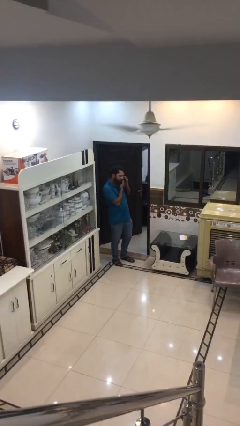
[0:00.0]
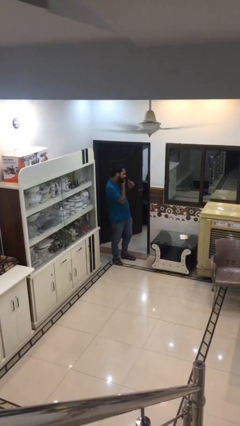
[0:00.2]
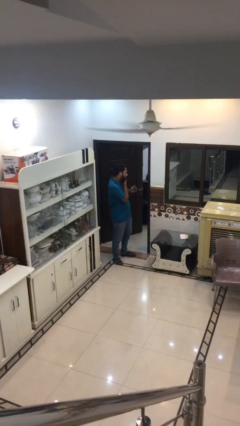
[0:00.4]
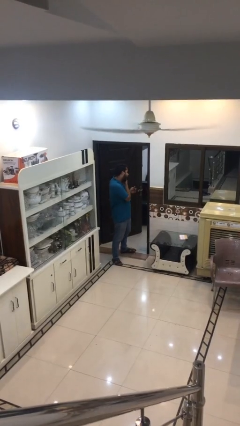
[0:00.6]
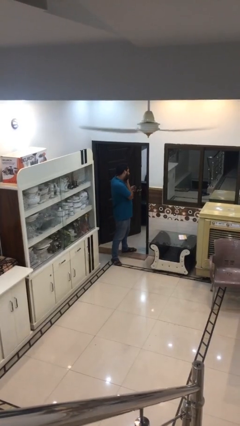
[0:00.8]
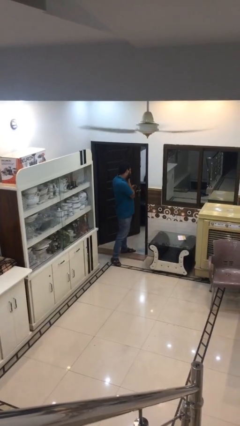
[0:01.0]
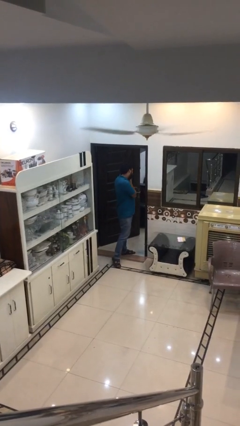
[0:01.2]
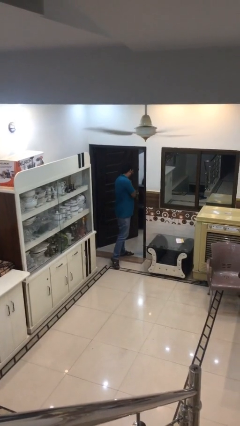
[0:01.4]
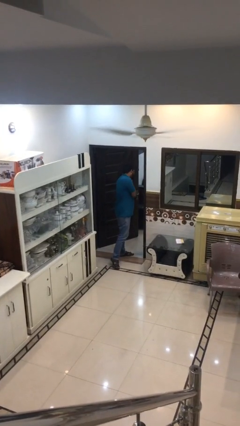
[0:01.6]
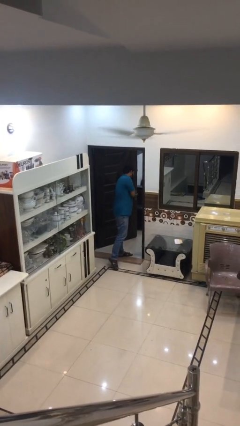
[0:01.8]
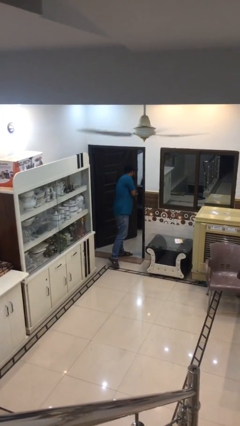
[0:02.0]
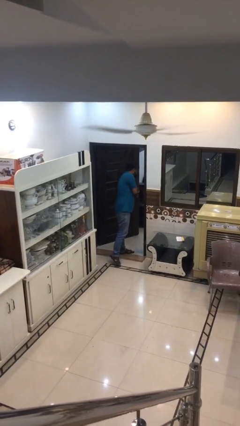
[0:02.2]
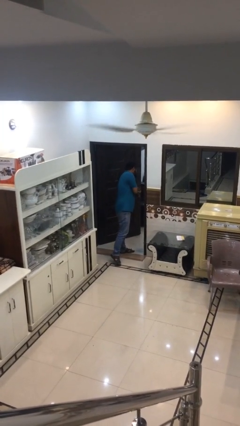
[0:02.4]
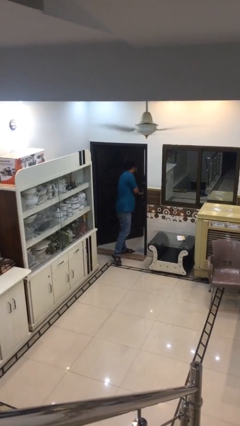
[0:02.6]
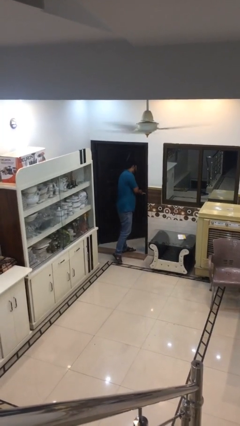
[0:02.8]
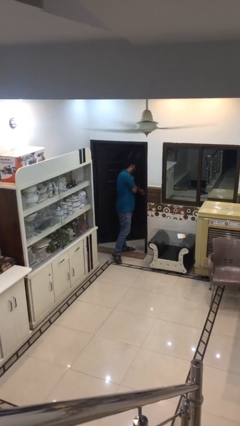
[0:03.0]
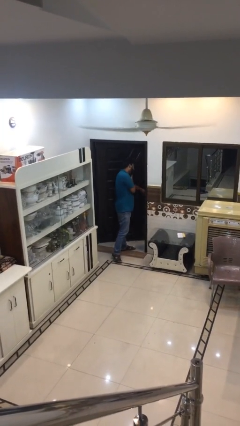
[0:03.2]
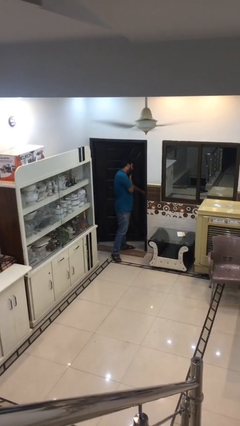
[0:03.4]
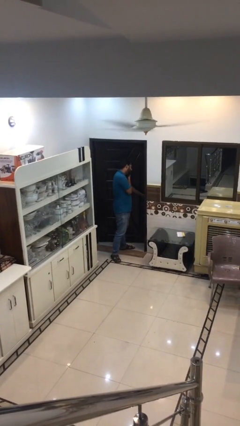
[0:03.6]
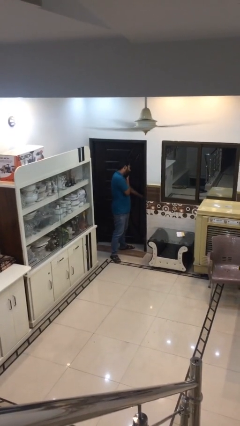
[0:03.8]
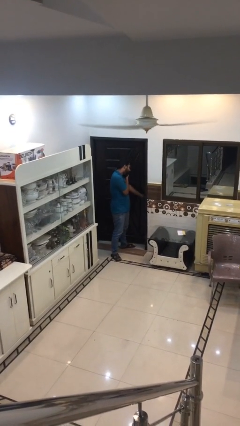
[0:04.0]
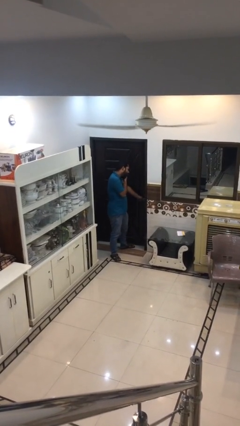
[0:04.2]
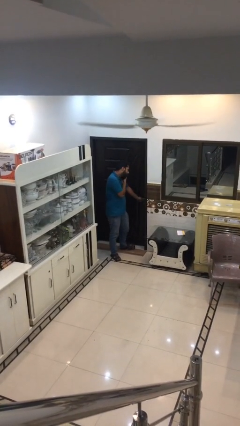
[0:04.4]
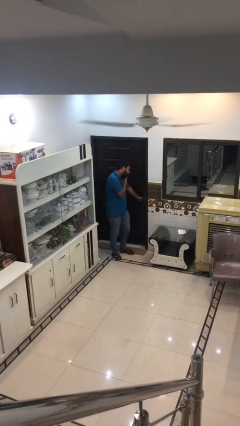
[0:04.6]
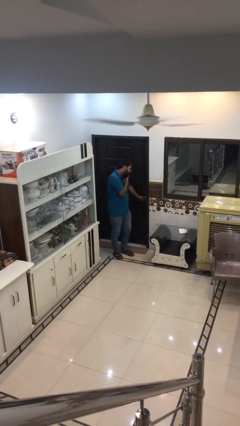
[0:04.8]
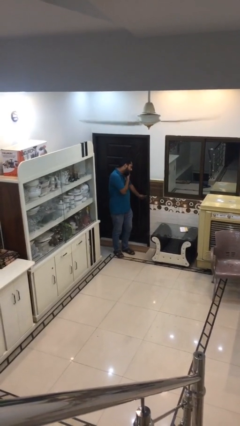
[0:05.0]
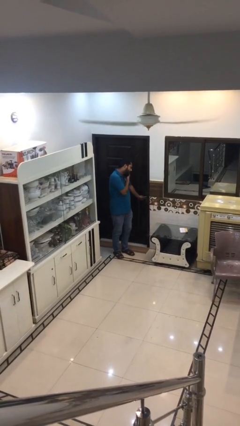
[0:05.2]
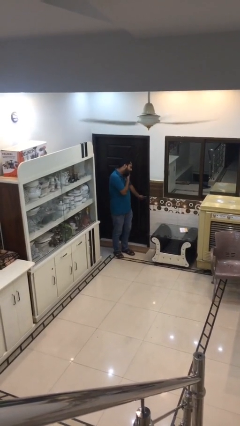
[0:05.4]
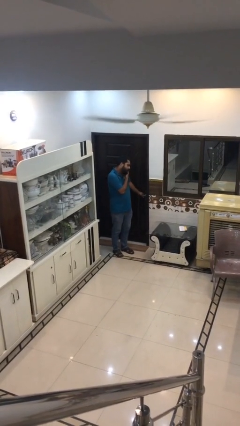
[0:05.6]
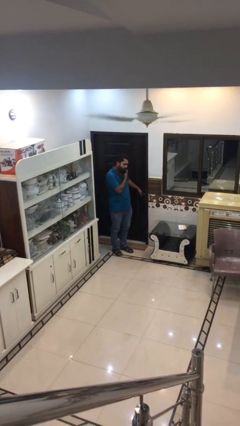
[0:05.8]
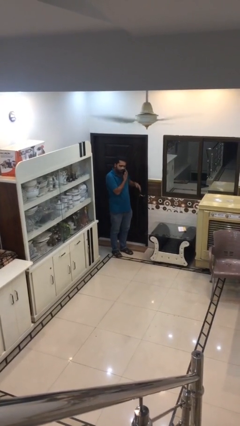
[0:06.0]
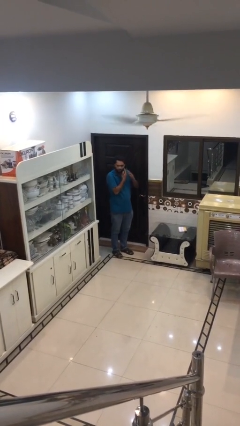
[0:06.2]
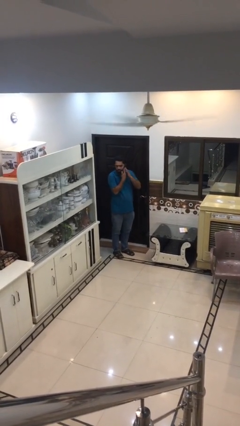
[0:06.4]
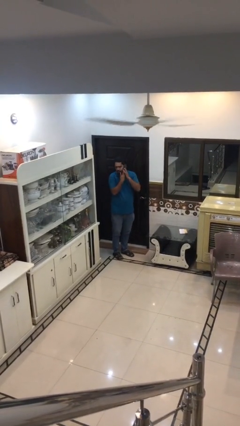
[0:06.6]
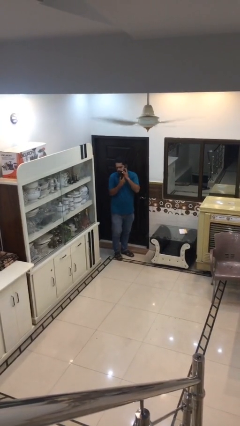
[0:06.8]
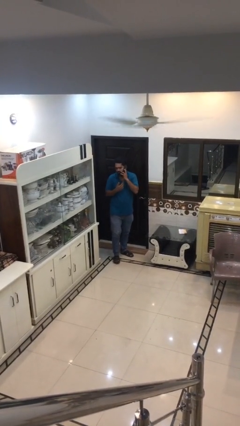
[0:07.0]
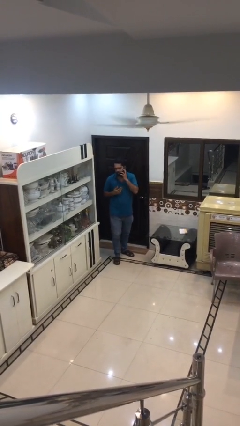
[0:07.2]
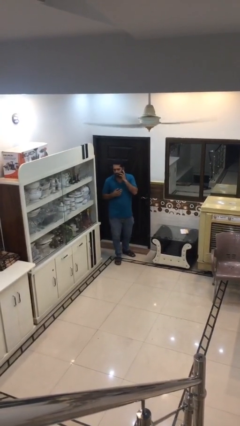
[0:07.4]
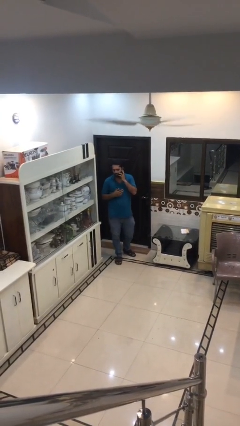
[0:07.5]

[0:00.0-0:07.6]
person closes facility door

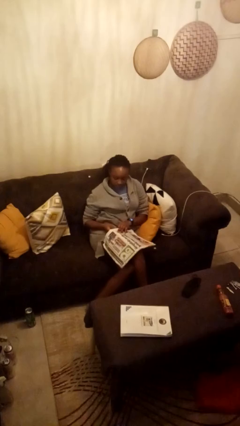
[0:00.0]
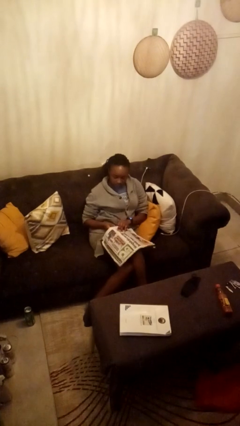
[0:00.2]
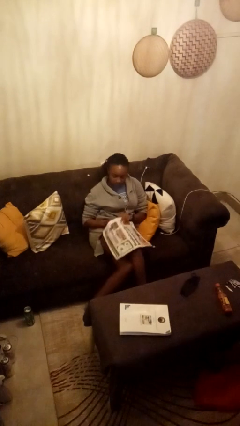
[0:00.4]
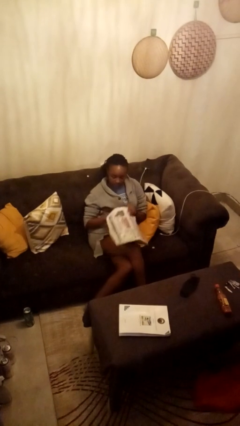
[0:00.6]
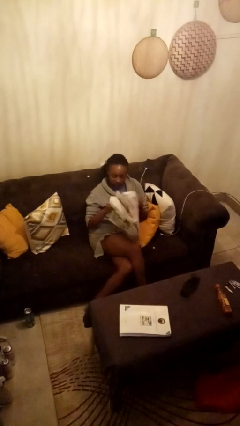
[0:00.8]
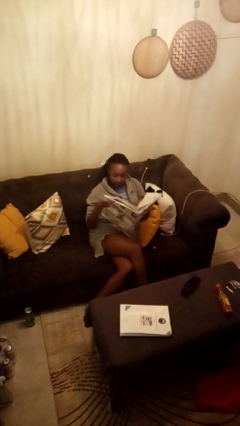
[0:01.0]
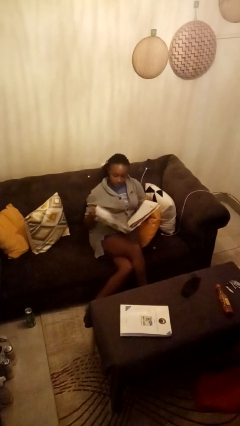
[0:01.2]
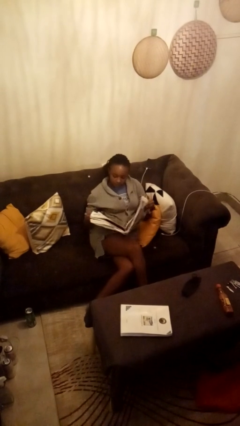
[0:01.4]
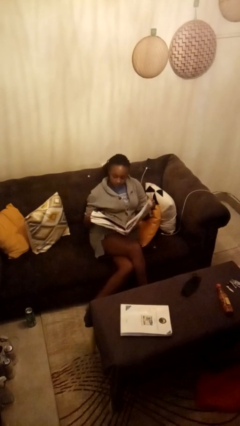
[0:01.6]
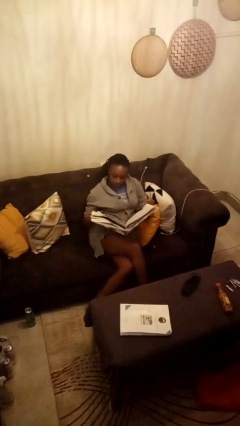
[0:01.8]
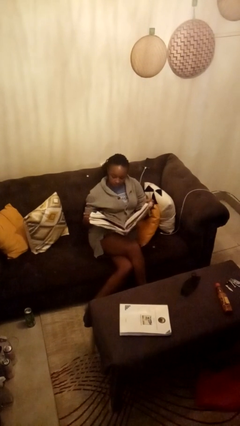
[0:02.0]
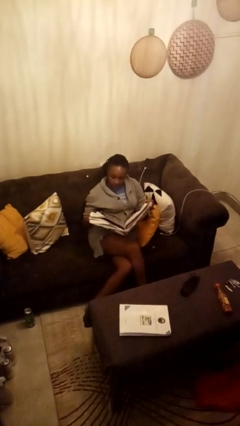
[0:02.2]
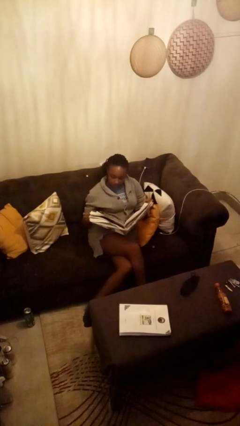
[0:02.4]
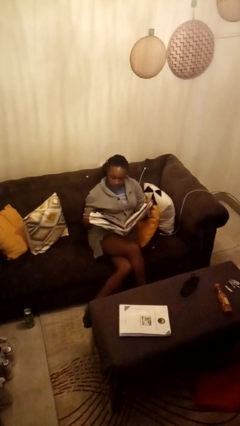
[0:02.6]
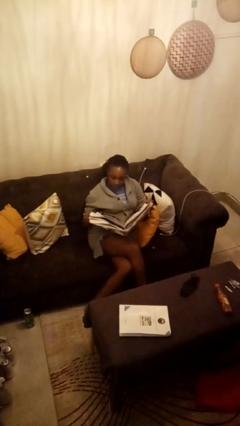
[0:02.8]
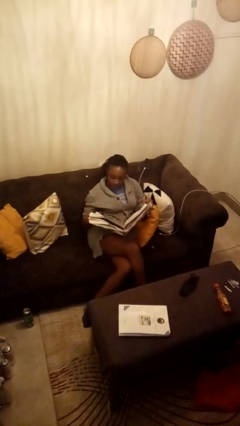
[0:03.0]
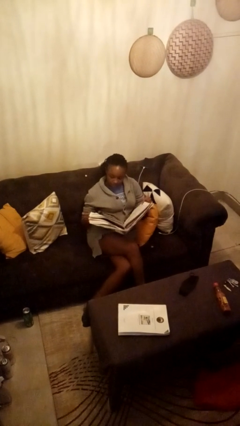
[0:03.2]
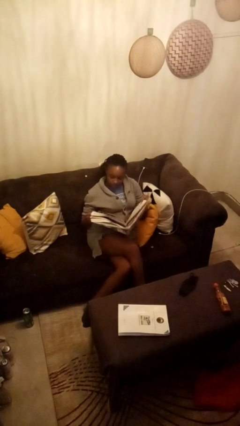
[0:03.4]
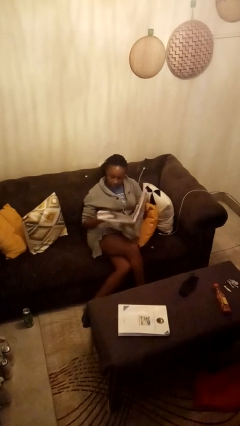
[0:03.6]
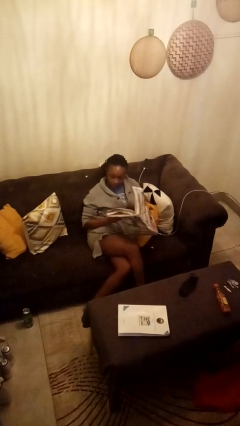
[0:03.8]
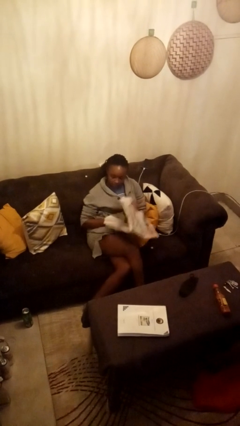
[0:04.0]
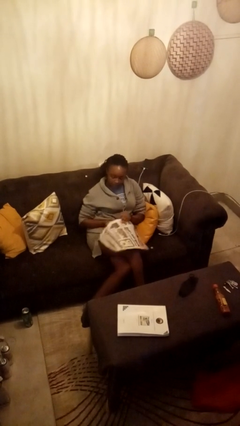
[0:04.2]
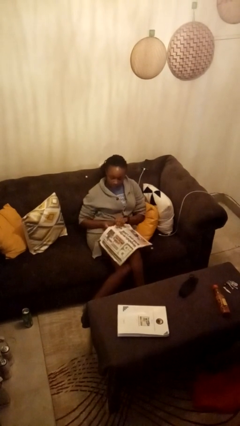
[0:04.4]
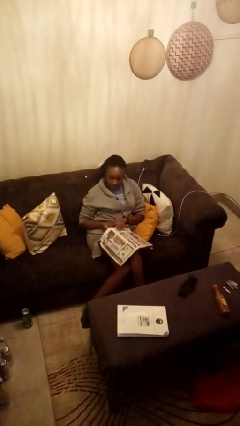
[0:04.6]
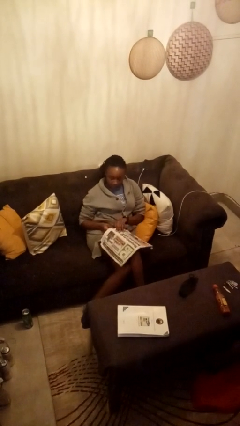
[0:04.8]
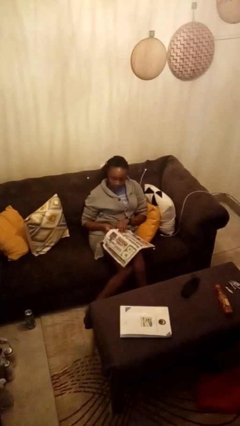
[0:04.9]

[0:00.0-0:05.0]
person reads newspaper

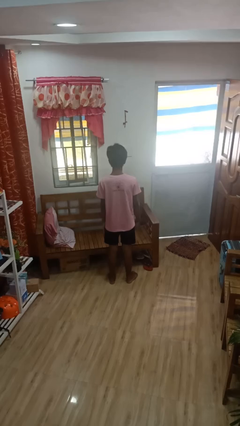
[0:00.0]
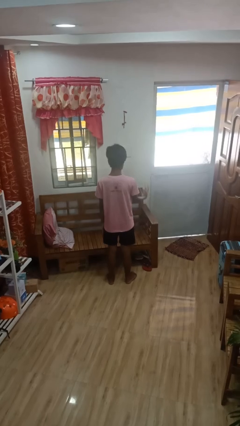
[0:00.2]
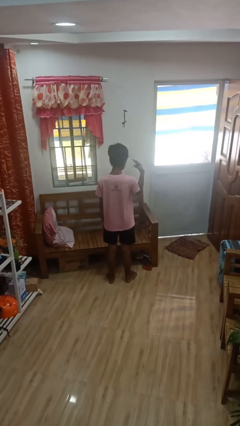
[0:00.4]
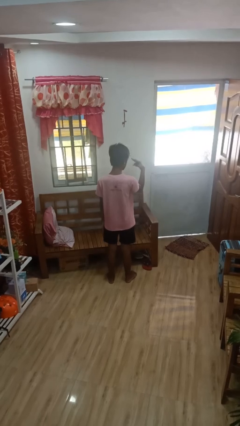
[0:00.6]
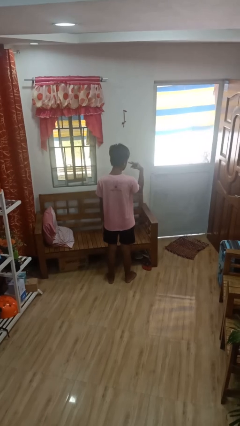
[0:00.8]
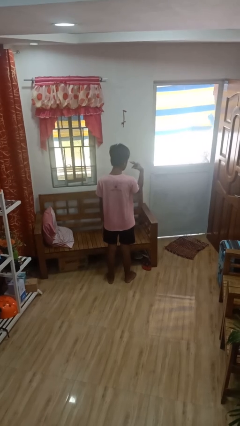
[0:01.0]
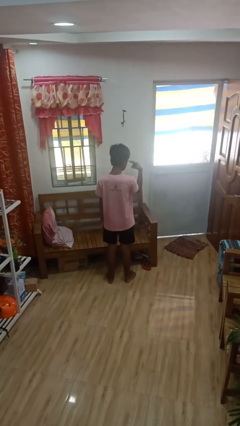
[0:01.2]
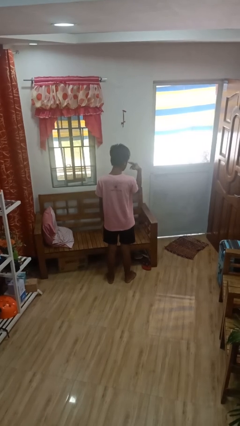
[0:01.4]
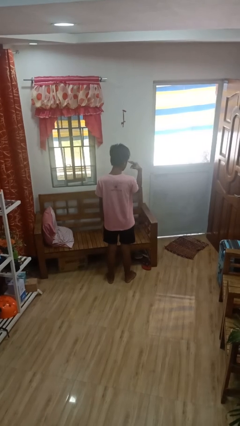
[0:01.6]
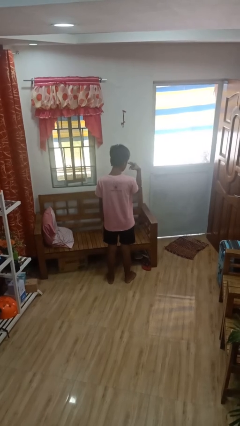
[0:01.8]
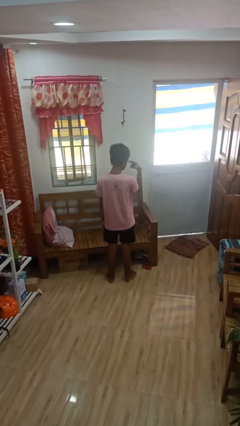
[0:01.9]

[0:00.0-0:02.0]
person gestures watch closely

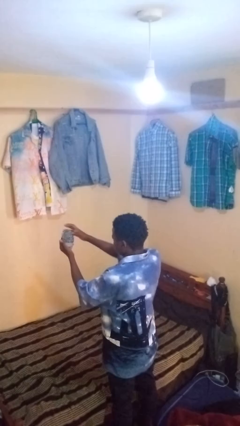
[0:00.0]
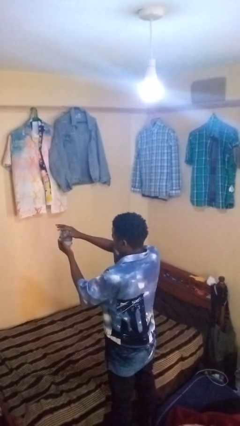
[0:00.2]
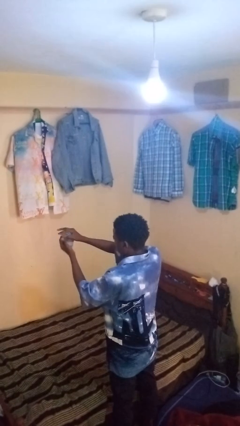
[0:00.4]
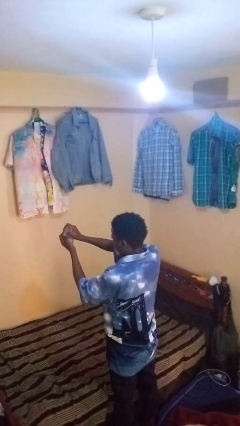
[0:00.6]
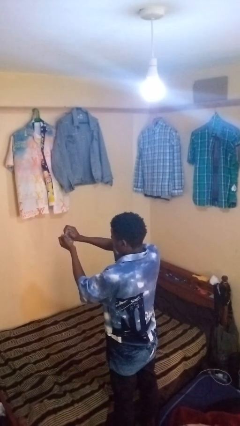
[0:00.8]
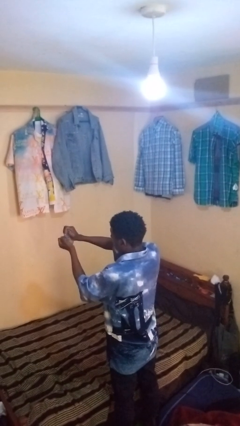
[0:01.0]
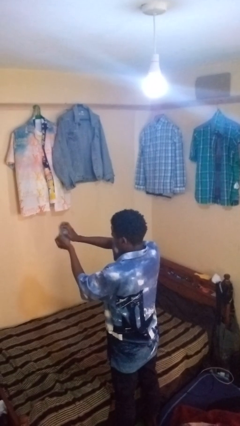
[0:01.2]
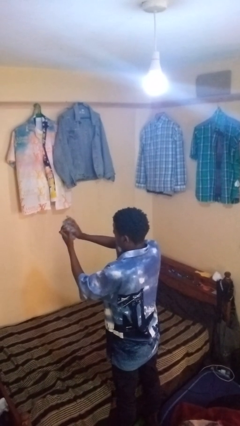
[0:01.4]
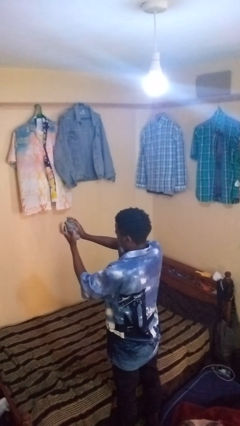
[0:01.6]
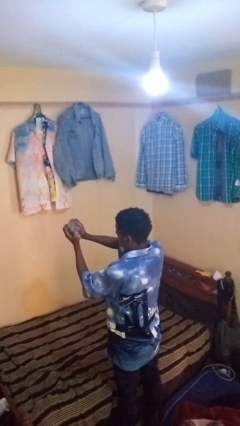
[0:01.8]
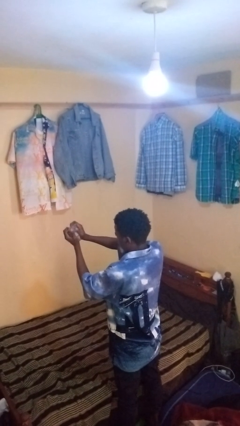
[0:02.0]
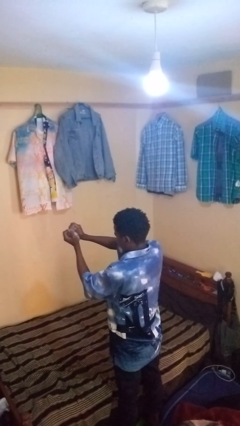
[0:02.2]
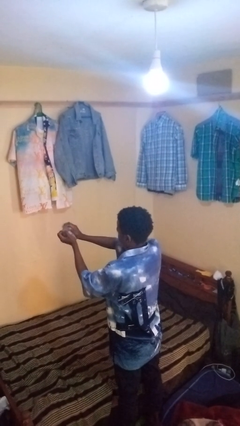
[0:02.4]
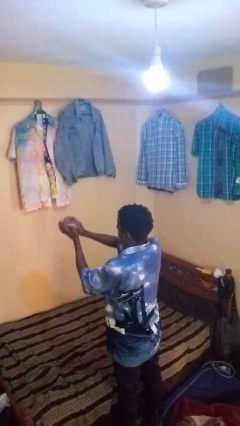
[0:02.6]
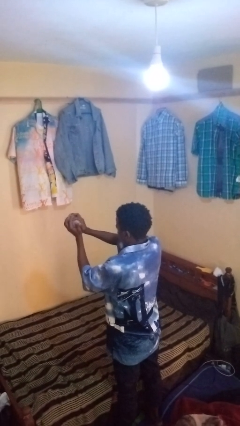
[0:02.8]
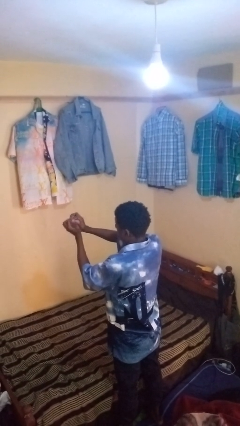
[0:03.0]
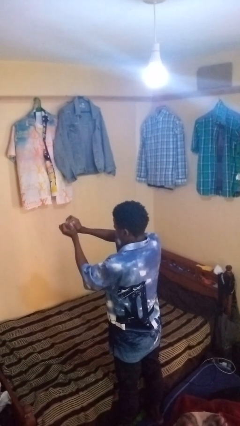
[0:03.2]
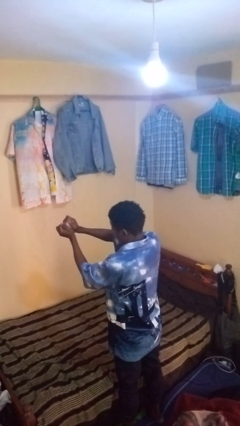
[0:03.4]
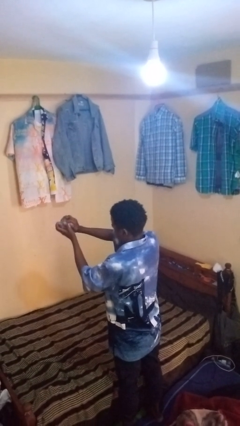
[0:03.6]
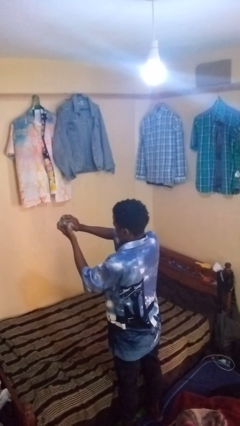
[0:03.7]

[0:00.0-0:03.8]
person squeezes object
